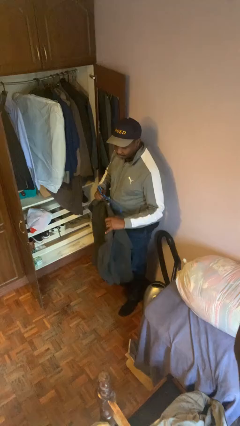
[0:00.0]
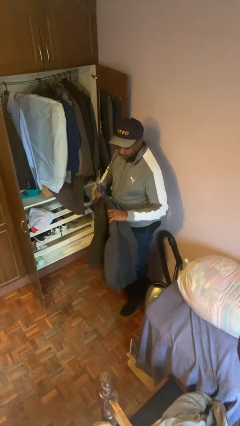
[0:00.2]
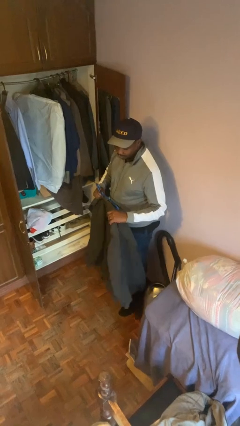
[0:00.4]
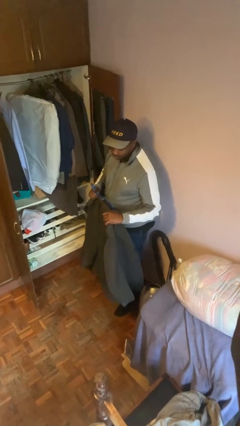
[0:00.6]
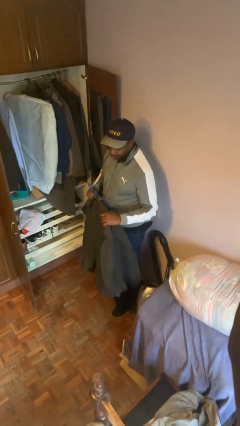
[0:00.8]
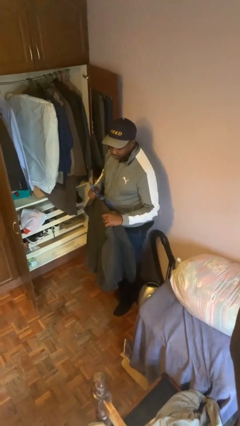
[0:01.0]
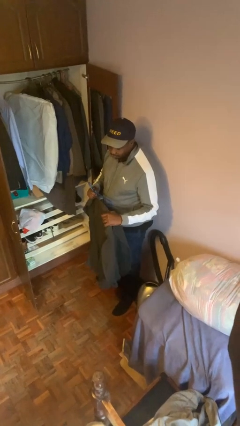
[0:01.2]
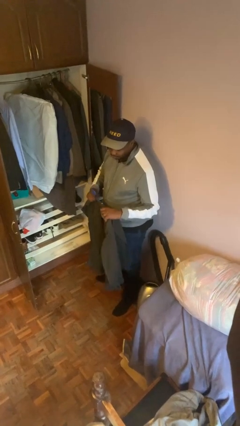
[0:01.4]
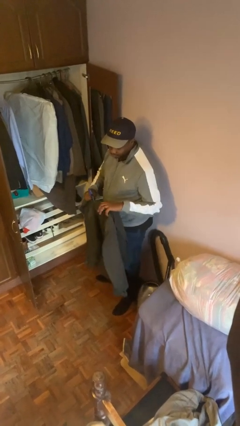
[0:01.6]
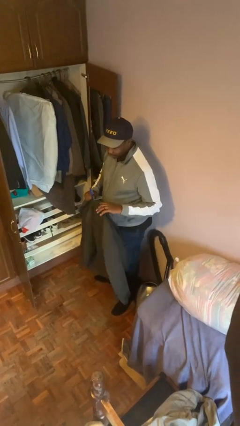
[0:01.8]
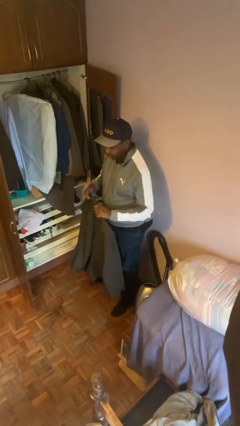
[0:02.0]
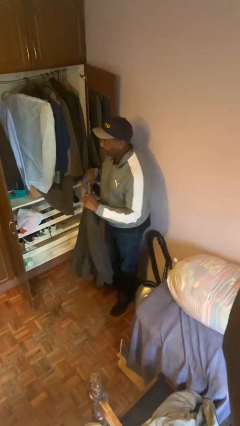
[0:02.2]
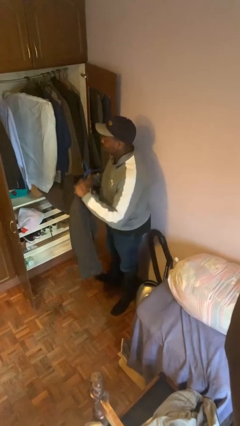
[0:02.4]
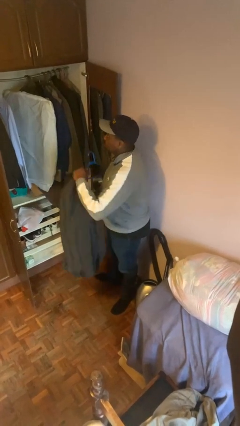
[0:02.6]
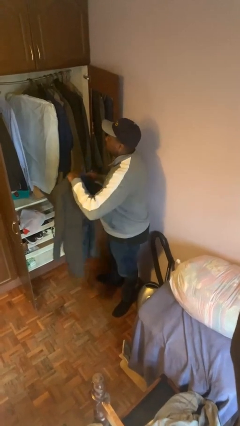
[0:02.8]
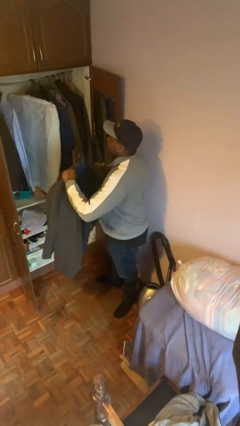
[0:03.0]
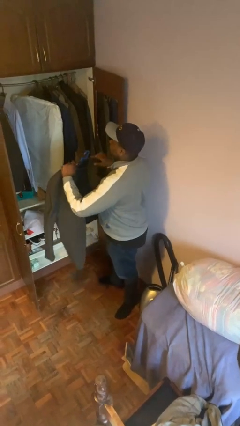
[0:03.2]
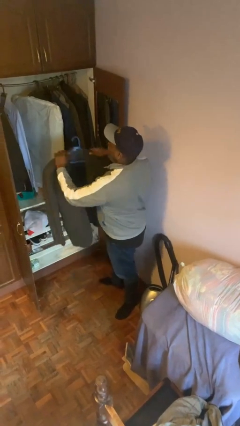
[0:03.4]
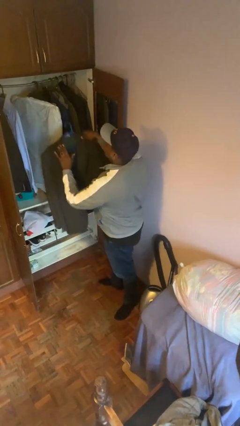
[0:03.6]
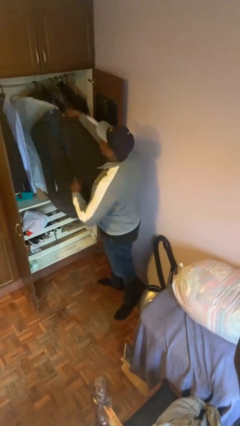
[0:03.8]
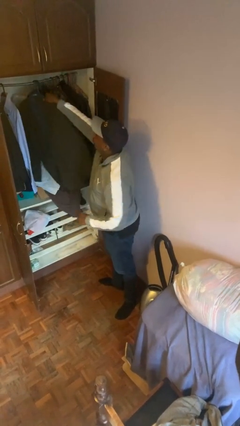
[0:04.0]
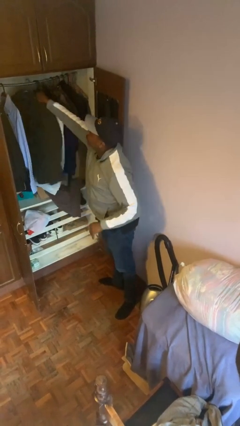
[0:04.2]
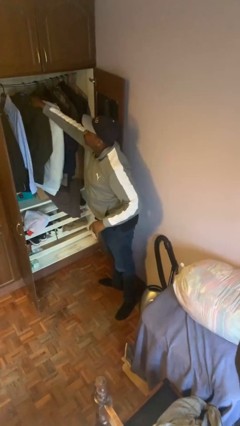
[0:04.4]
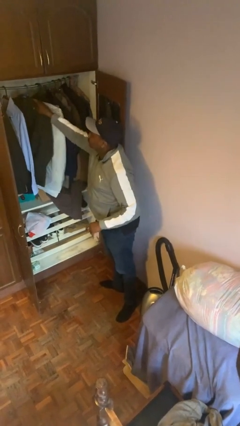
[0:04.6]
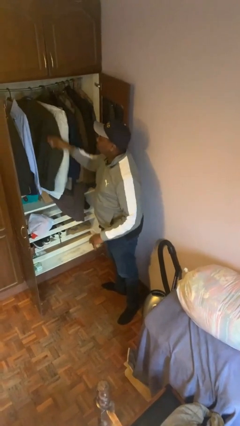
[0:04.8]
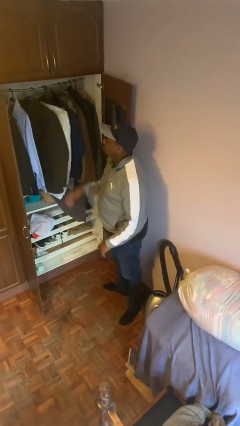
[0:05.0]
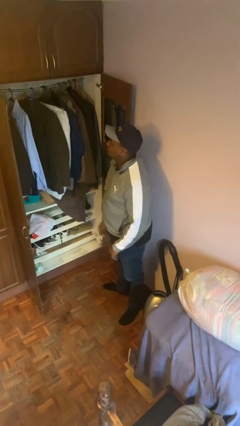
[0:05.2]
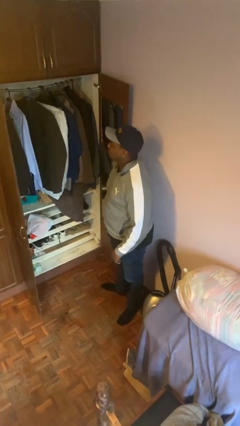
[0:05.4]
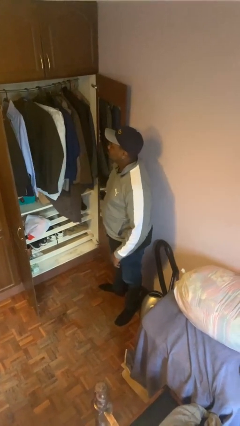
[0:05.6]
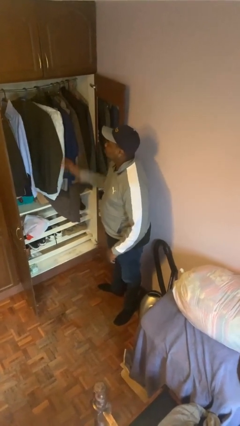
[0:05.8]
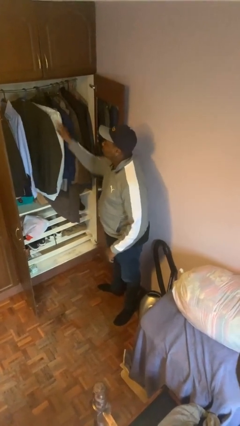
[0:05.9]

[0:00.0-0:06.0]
person puts clothes into closet

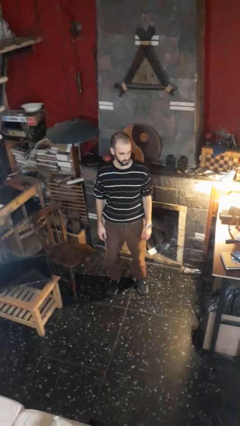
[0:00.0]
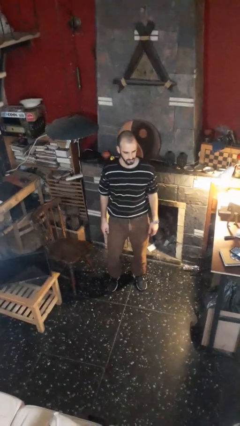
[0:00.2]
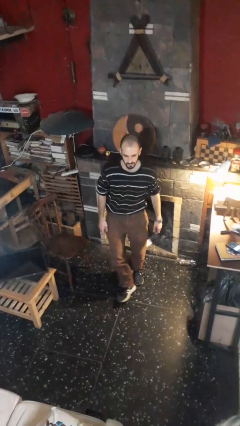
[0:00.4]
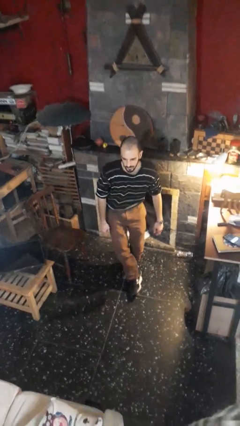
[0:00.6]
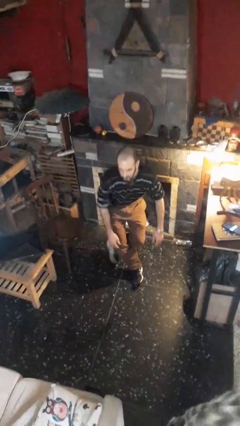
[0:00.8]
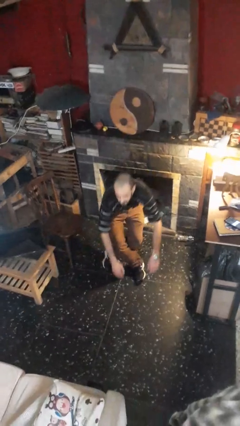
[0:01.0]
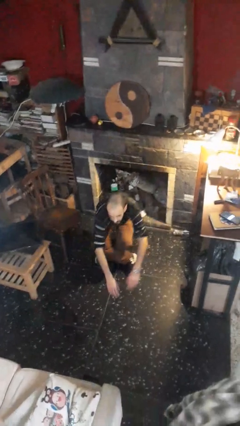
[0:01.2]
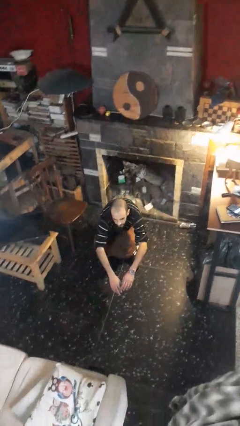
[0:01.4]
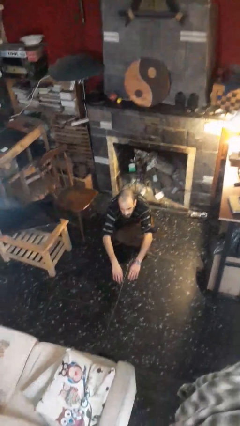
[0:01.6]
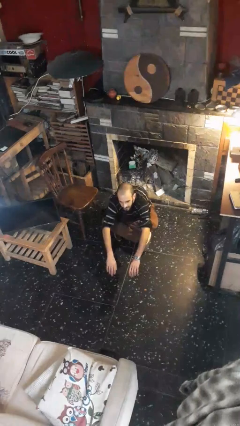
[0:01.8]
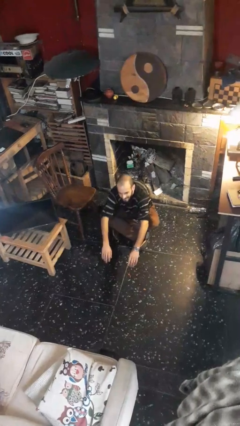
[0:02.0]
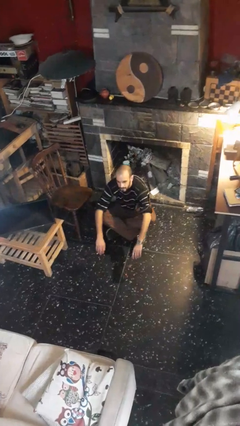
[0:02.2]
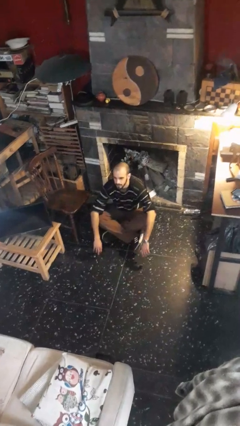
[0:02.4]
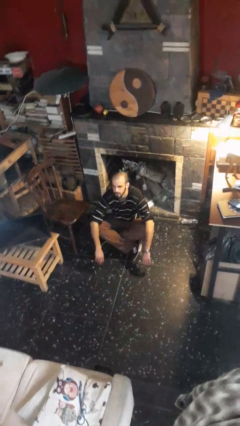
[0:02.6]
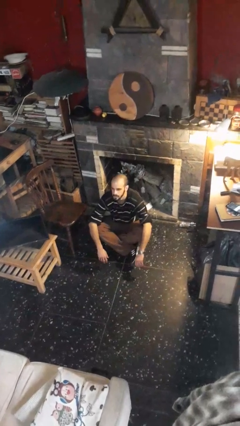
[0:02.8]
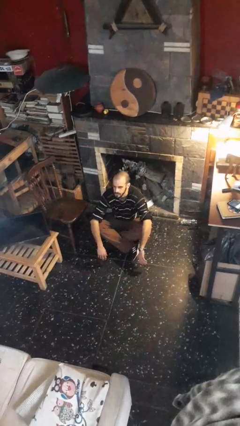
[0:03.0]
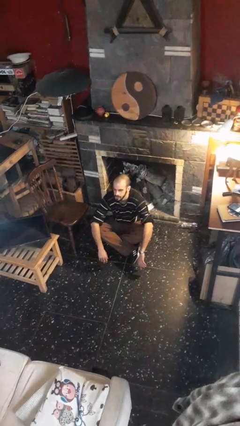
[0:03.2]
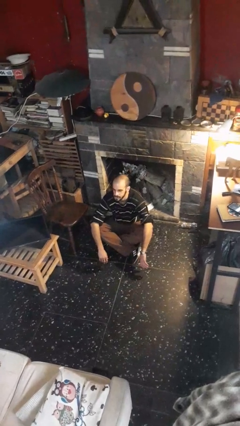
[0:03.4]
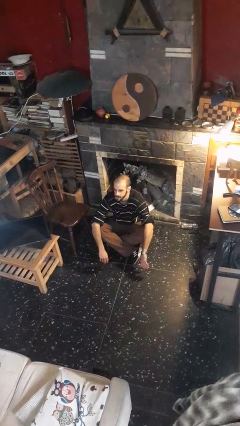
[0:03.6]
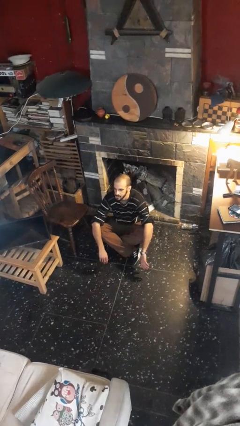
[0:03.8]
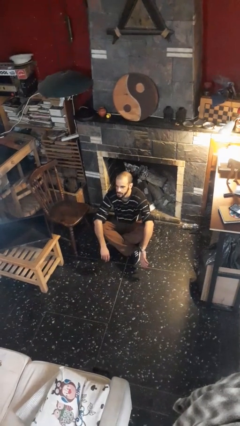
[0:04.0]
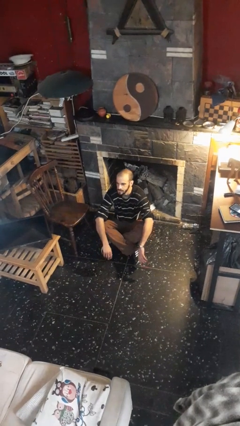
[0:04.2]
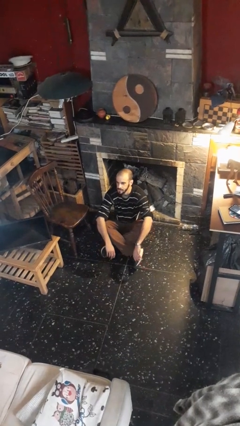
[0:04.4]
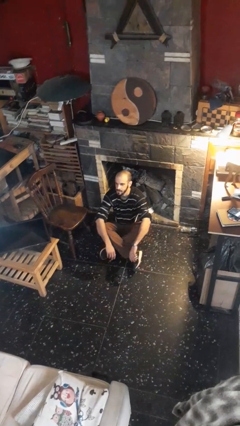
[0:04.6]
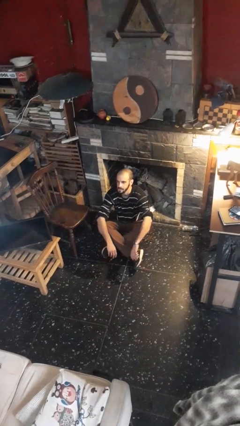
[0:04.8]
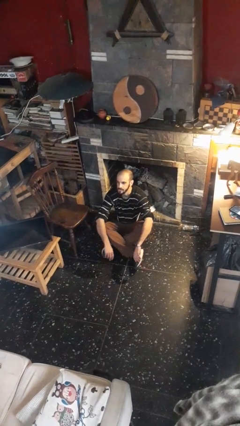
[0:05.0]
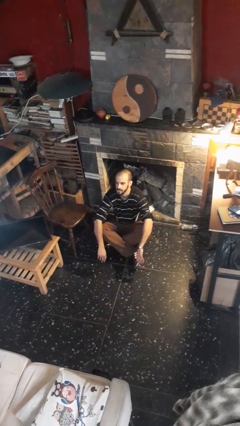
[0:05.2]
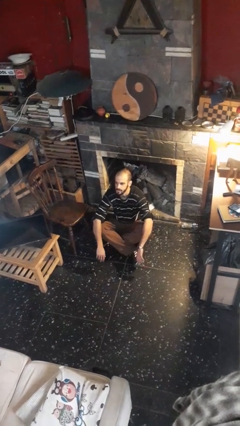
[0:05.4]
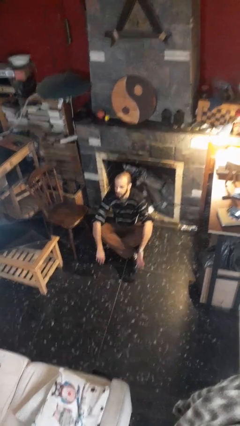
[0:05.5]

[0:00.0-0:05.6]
person sits crisscross

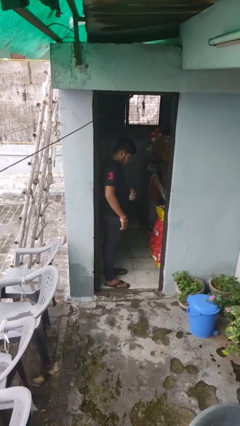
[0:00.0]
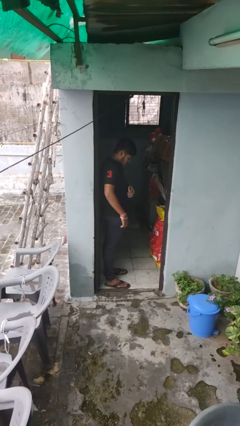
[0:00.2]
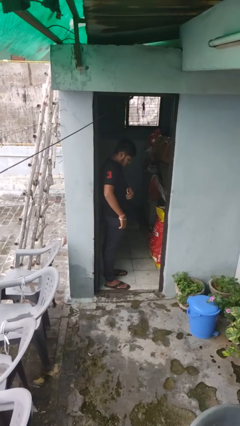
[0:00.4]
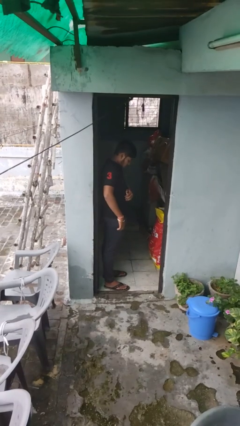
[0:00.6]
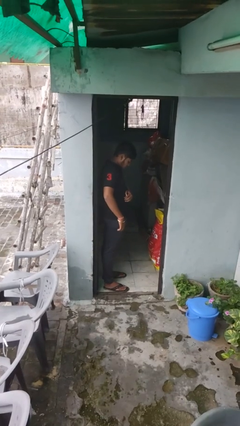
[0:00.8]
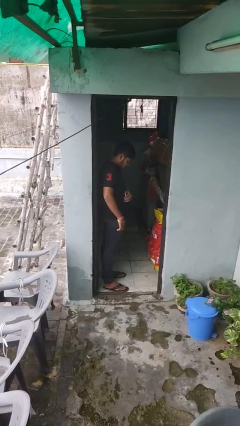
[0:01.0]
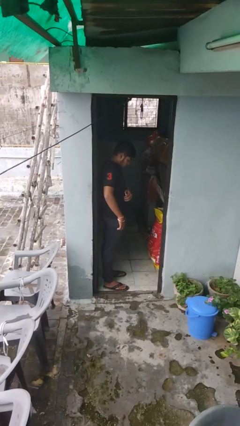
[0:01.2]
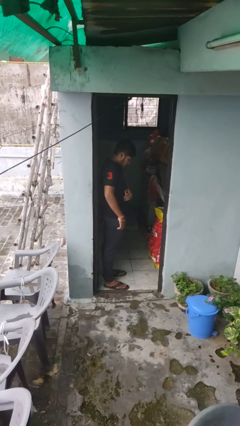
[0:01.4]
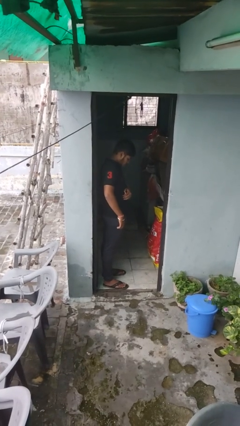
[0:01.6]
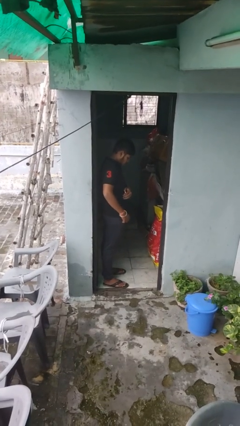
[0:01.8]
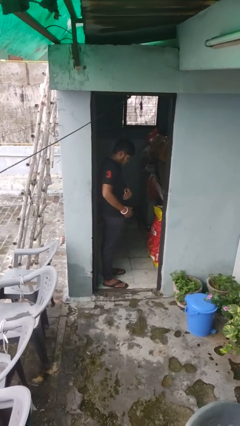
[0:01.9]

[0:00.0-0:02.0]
person applies deodorant

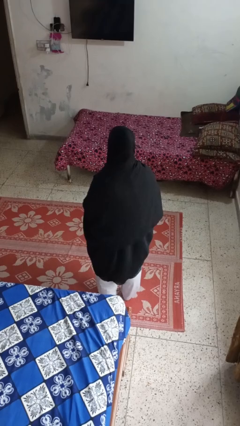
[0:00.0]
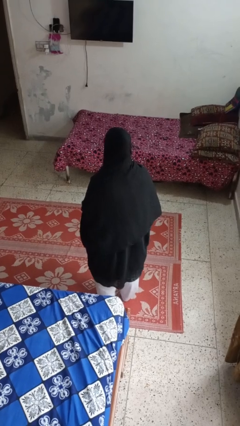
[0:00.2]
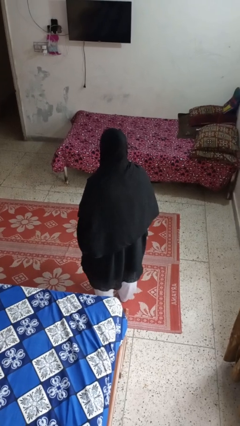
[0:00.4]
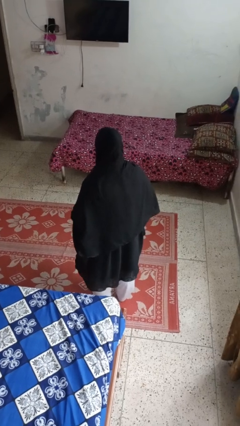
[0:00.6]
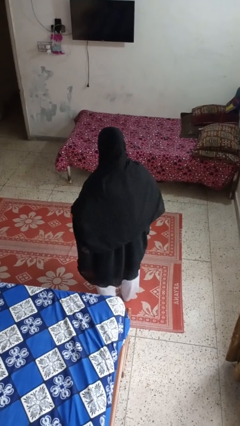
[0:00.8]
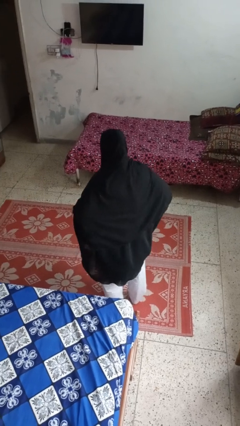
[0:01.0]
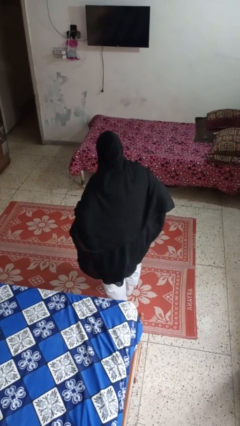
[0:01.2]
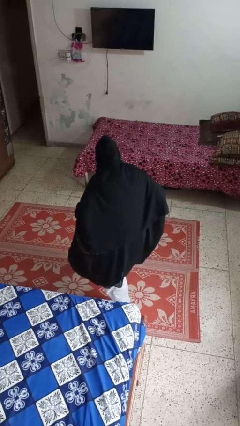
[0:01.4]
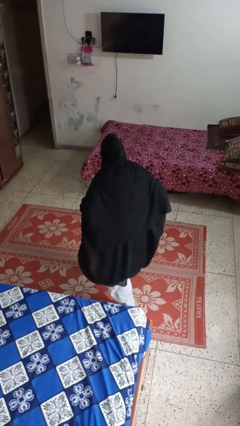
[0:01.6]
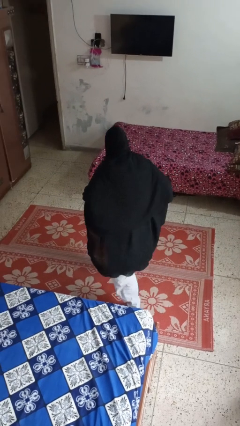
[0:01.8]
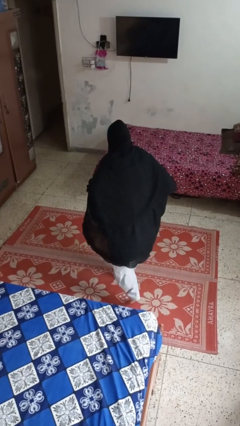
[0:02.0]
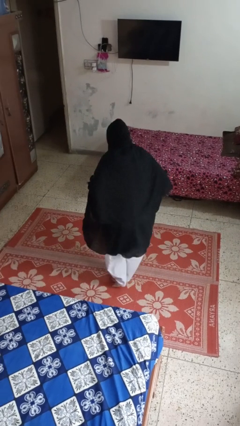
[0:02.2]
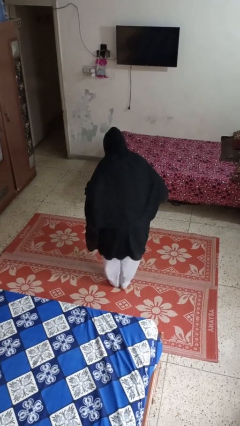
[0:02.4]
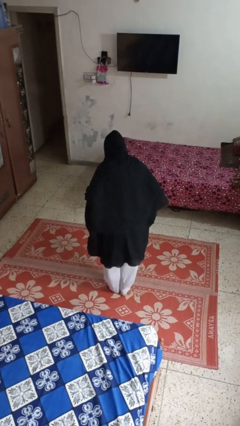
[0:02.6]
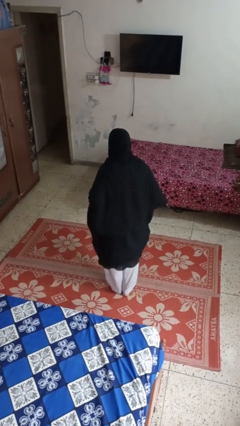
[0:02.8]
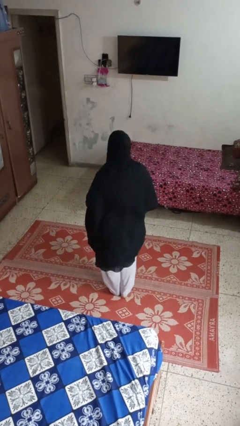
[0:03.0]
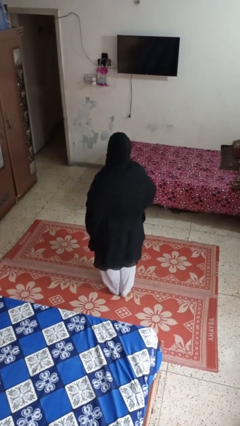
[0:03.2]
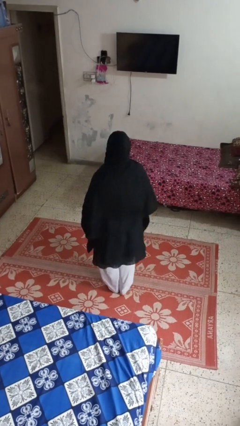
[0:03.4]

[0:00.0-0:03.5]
person walks tiptoe

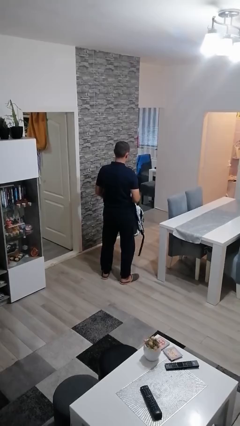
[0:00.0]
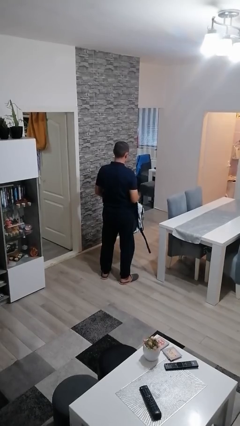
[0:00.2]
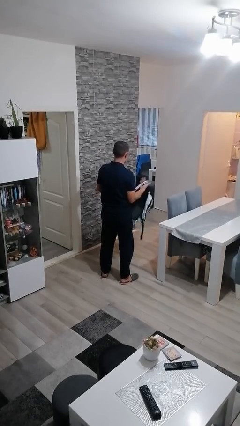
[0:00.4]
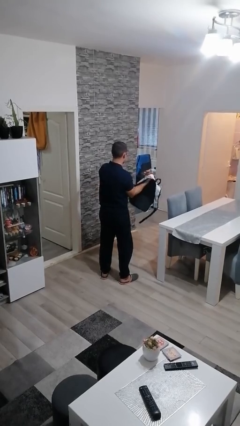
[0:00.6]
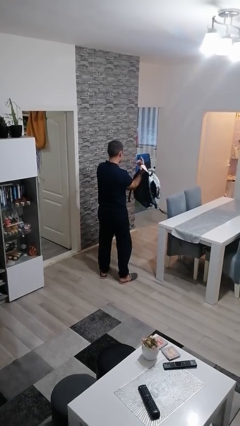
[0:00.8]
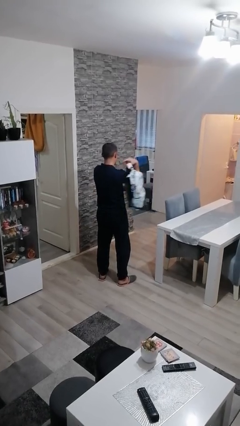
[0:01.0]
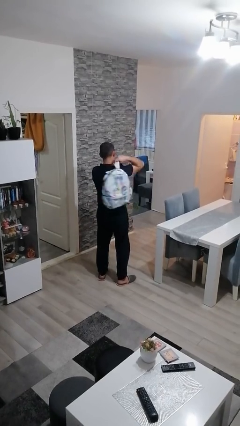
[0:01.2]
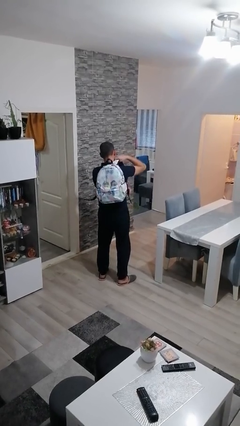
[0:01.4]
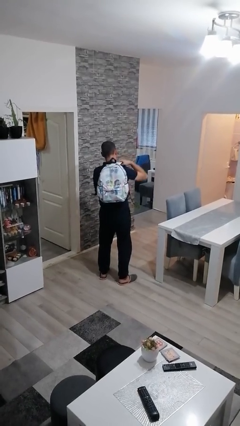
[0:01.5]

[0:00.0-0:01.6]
person puts on backpack
